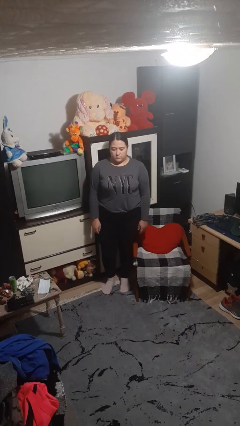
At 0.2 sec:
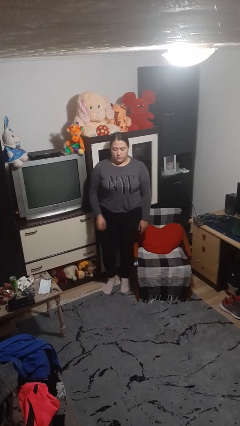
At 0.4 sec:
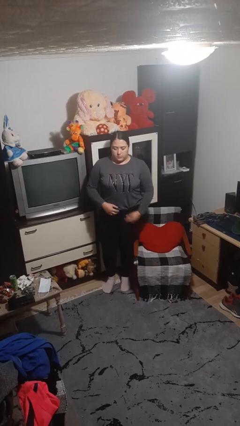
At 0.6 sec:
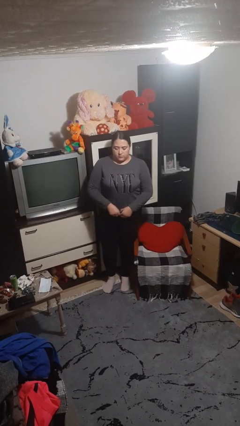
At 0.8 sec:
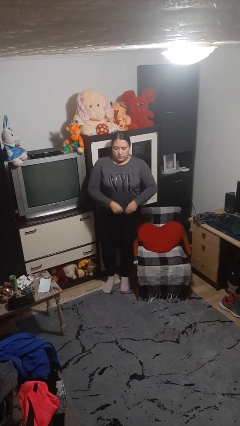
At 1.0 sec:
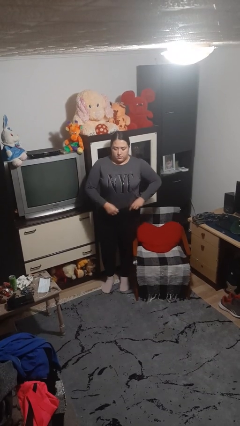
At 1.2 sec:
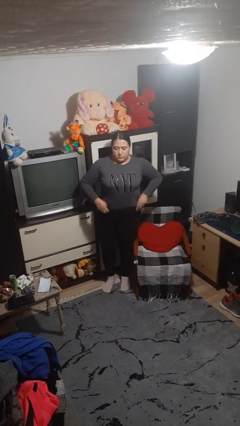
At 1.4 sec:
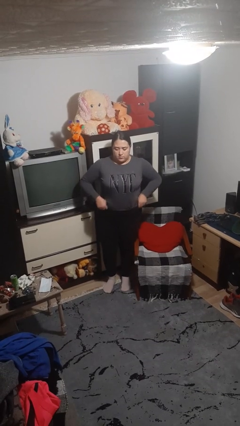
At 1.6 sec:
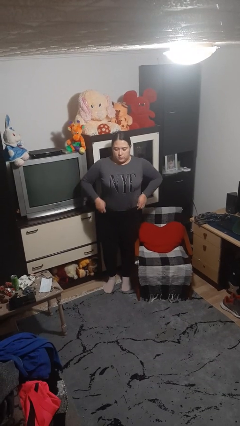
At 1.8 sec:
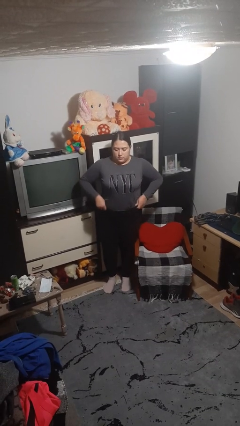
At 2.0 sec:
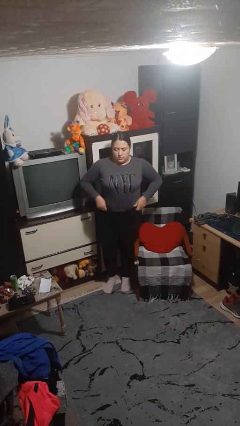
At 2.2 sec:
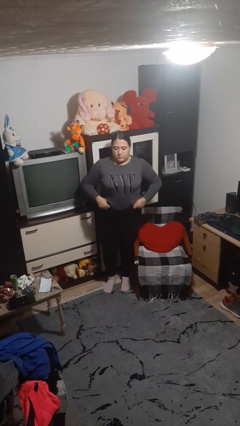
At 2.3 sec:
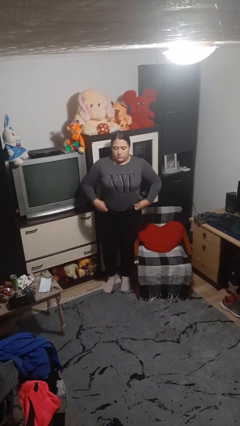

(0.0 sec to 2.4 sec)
person hikes up pants

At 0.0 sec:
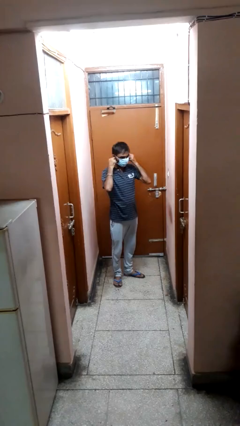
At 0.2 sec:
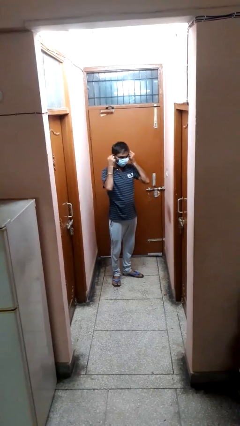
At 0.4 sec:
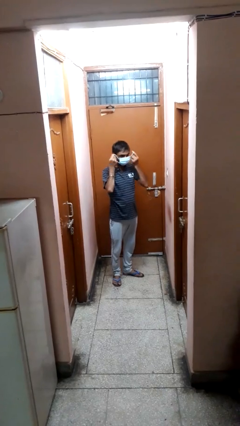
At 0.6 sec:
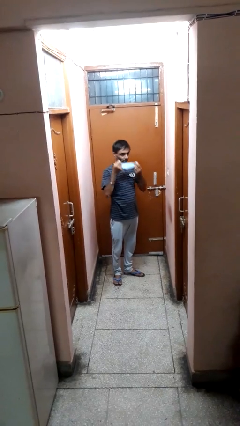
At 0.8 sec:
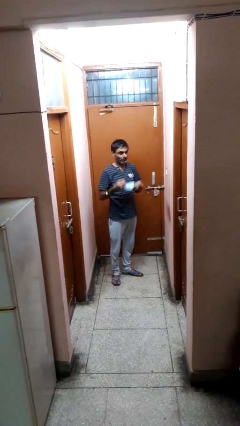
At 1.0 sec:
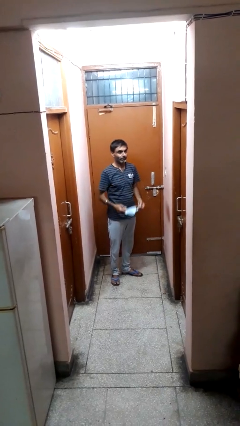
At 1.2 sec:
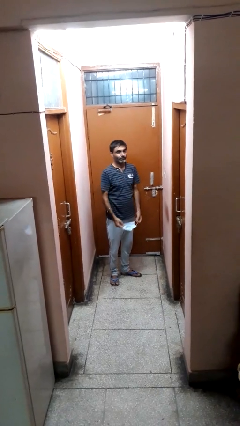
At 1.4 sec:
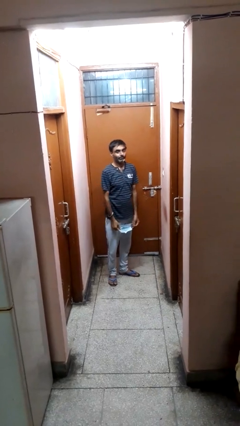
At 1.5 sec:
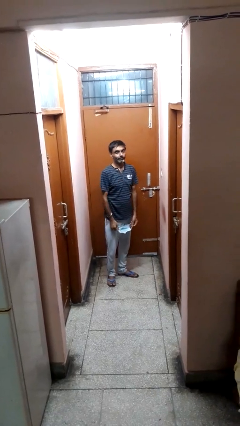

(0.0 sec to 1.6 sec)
person takes off facemask

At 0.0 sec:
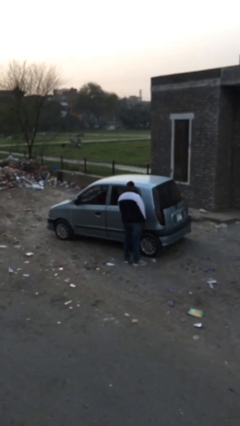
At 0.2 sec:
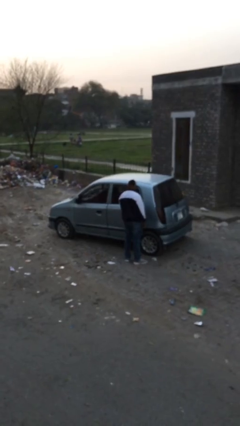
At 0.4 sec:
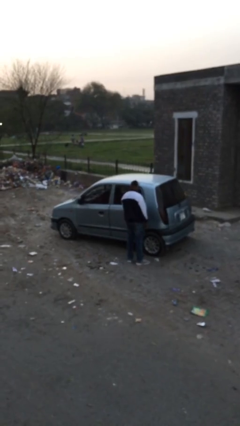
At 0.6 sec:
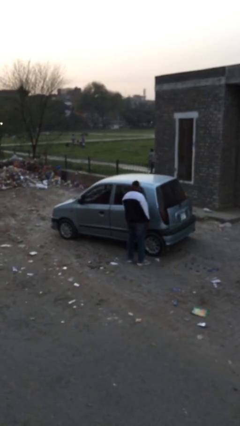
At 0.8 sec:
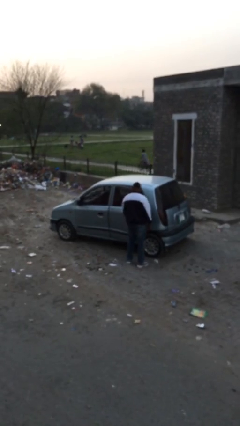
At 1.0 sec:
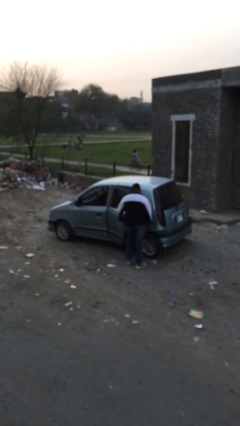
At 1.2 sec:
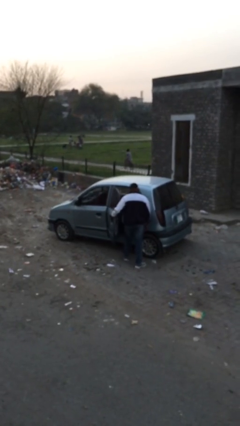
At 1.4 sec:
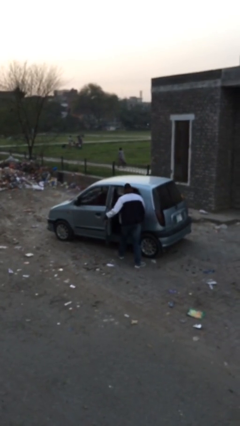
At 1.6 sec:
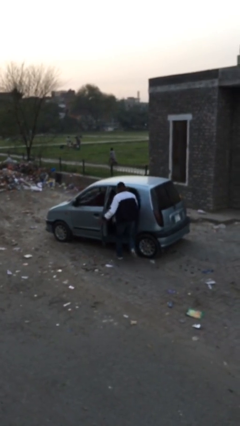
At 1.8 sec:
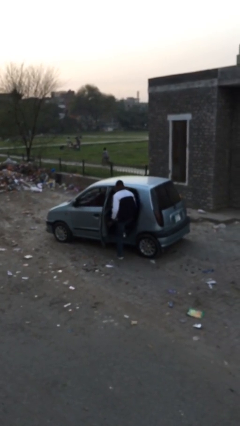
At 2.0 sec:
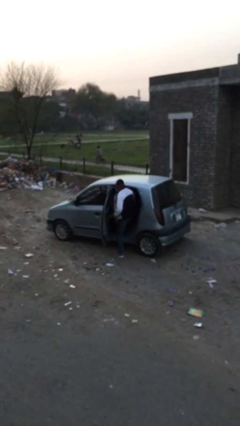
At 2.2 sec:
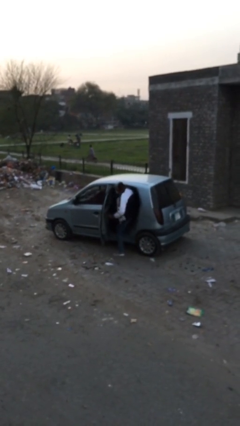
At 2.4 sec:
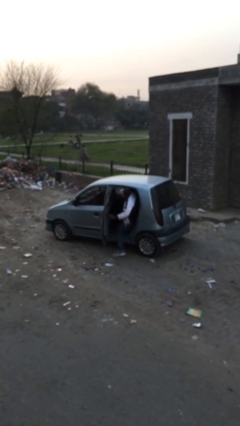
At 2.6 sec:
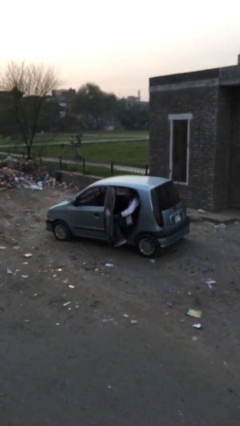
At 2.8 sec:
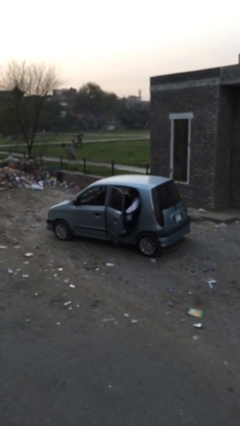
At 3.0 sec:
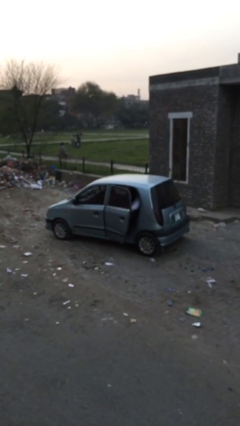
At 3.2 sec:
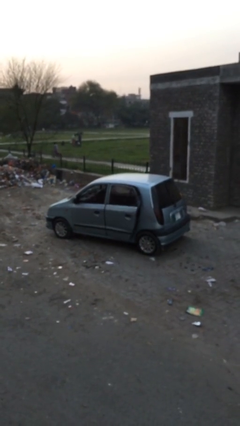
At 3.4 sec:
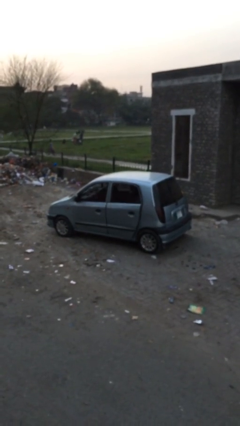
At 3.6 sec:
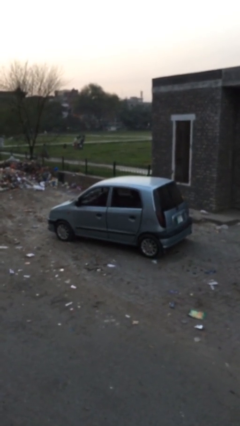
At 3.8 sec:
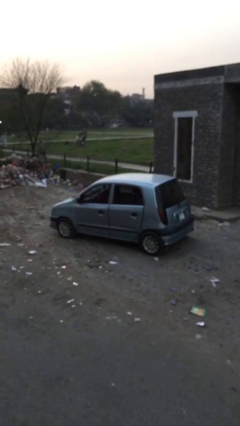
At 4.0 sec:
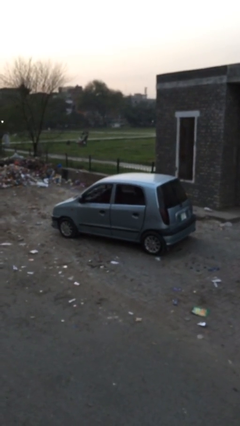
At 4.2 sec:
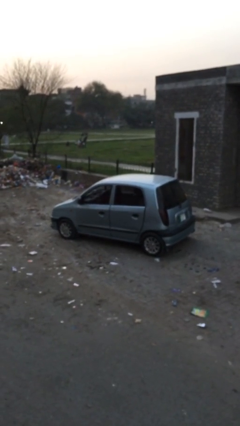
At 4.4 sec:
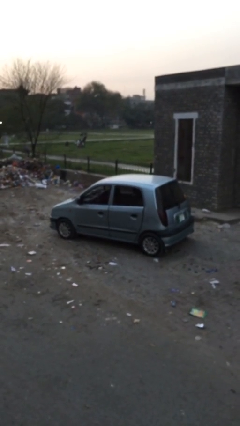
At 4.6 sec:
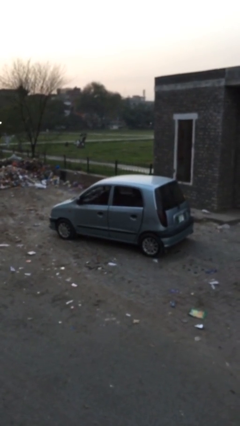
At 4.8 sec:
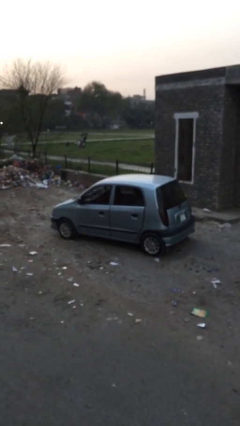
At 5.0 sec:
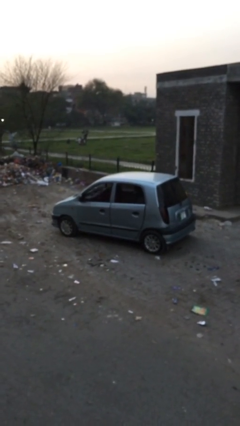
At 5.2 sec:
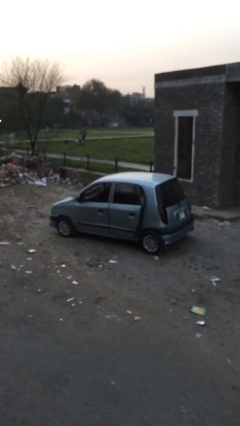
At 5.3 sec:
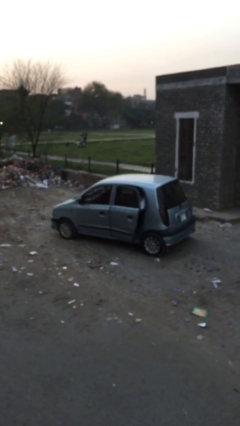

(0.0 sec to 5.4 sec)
car picks up person

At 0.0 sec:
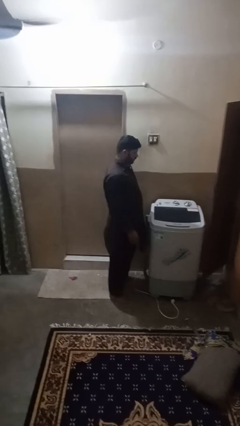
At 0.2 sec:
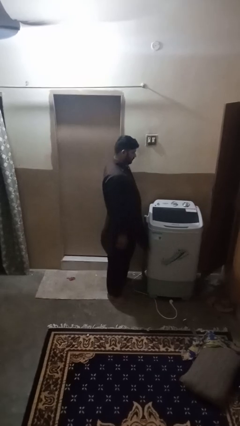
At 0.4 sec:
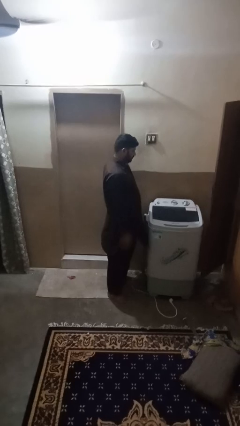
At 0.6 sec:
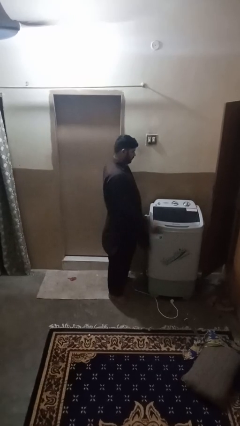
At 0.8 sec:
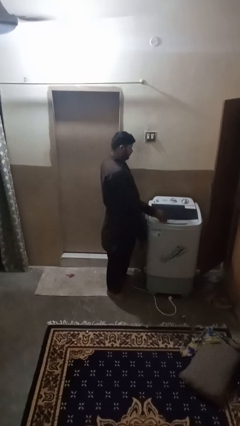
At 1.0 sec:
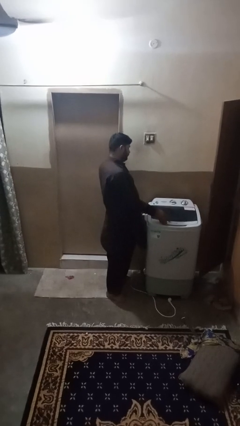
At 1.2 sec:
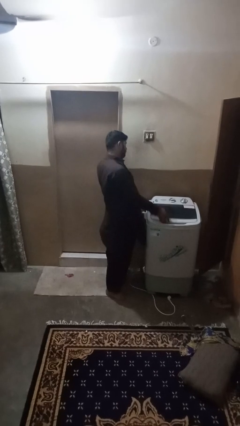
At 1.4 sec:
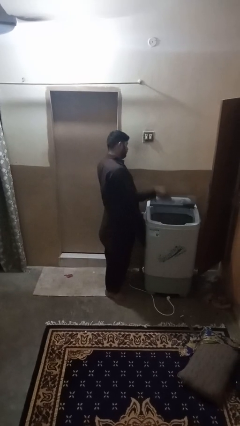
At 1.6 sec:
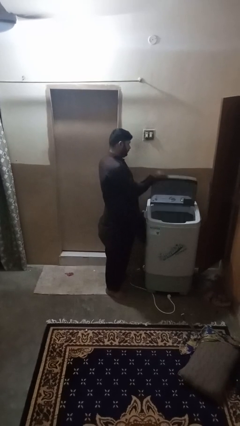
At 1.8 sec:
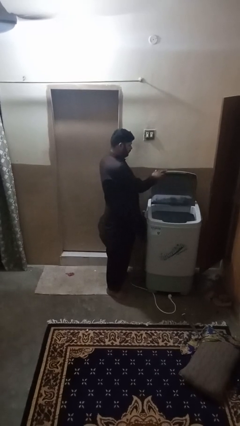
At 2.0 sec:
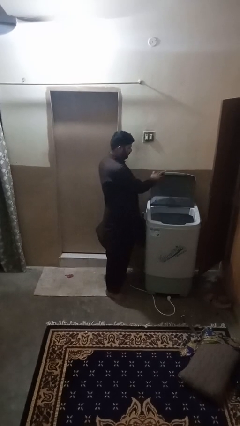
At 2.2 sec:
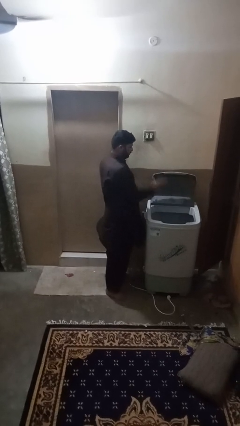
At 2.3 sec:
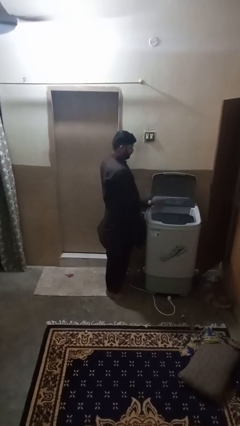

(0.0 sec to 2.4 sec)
person opens clothes washer

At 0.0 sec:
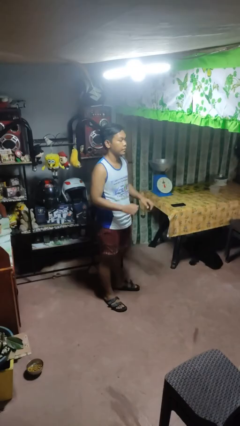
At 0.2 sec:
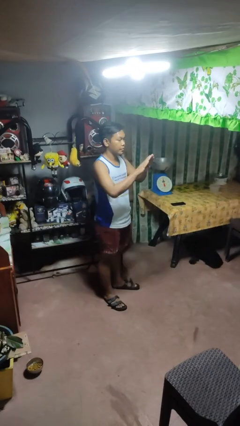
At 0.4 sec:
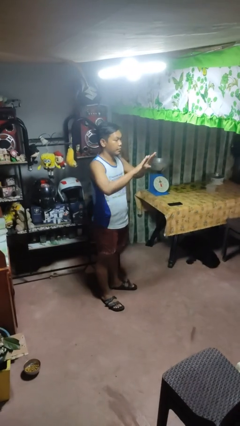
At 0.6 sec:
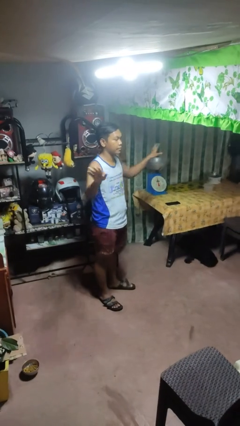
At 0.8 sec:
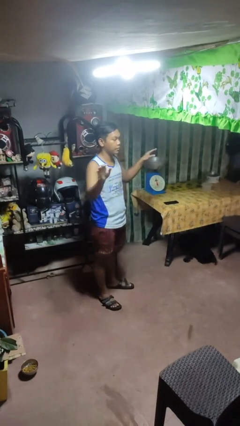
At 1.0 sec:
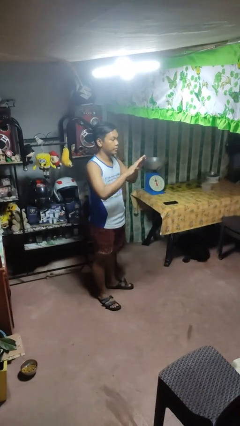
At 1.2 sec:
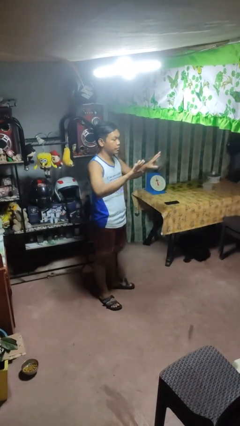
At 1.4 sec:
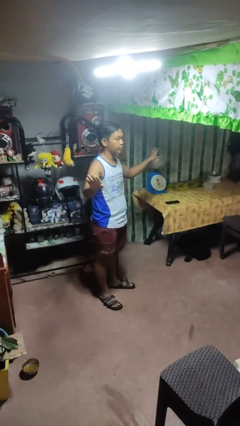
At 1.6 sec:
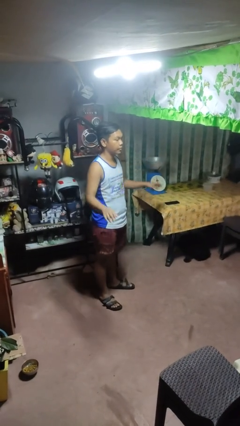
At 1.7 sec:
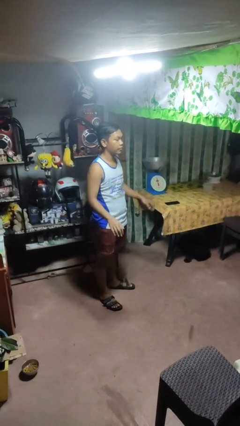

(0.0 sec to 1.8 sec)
person gestures zoom in

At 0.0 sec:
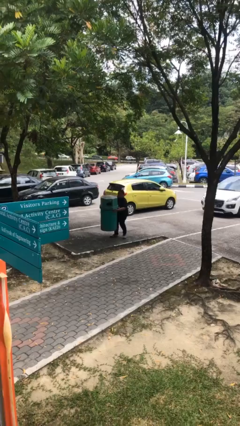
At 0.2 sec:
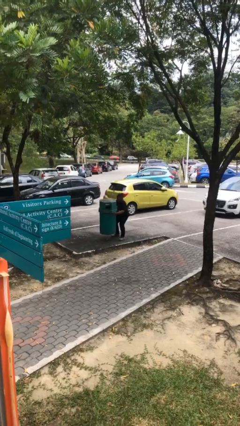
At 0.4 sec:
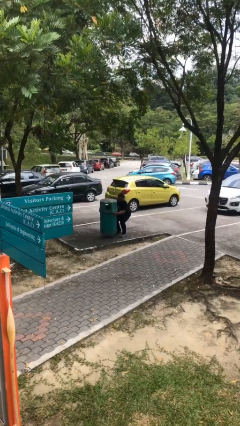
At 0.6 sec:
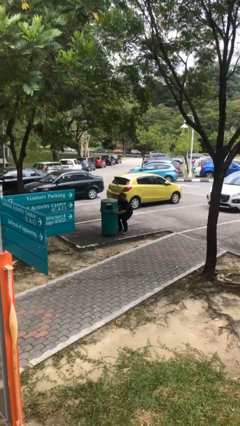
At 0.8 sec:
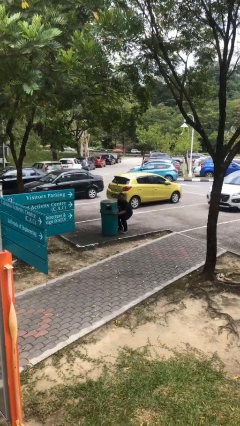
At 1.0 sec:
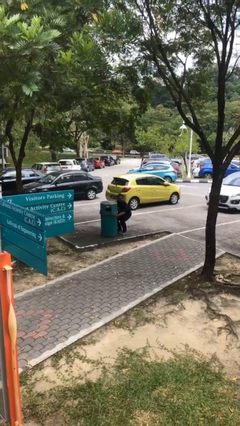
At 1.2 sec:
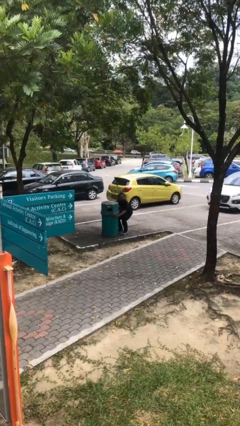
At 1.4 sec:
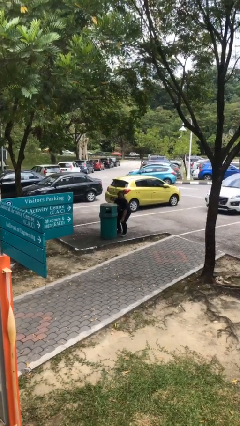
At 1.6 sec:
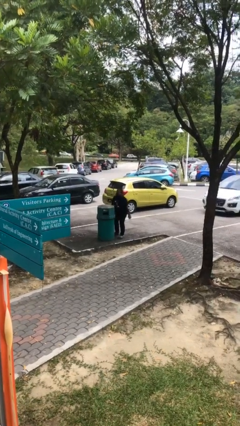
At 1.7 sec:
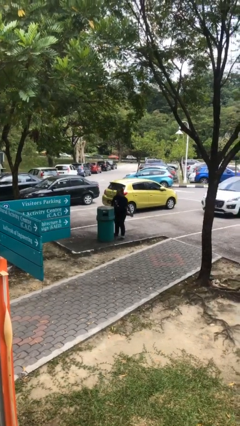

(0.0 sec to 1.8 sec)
person puts down object on floor

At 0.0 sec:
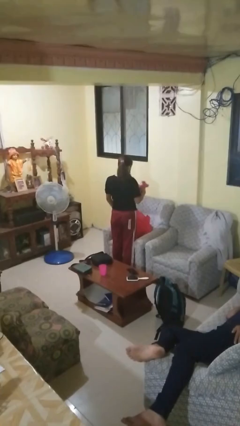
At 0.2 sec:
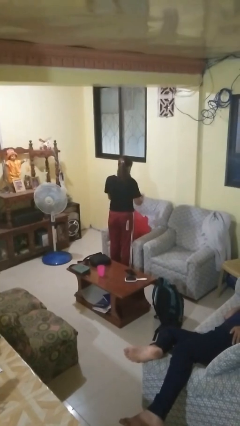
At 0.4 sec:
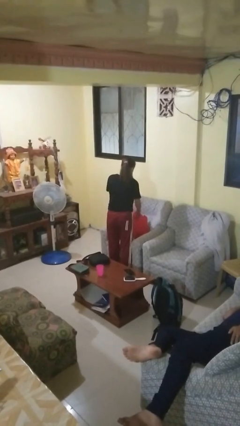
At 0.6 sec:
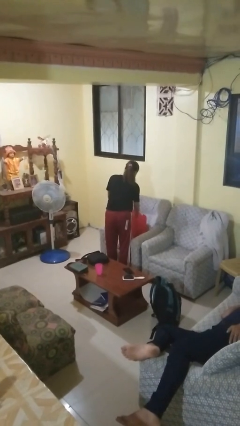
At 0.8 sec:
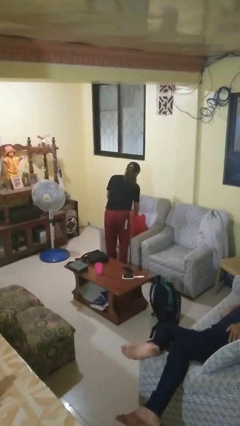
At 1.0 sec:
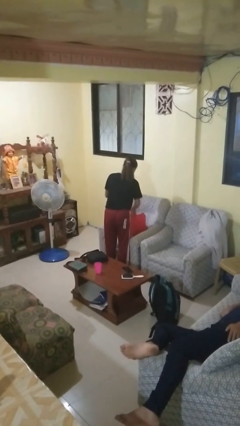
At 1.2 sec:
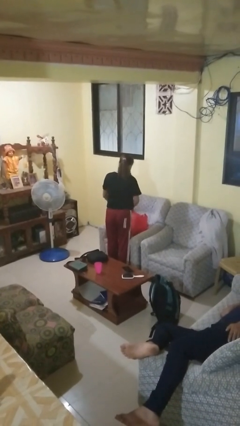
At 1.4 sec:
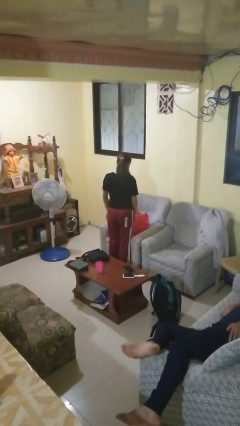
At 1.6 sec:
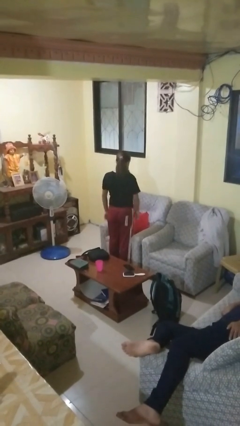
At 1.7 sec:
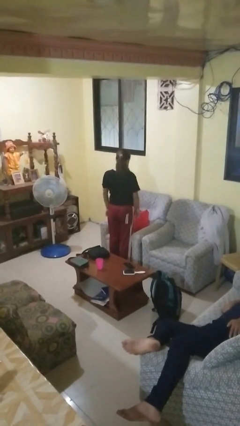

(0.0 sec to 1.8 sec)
person puts object into bag
